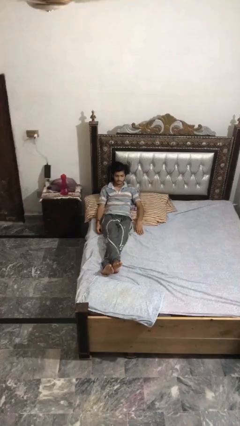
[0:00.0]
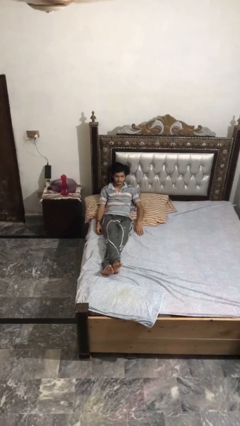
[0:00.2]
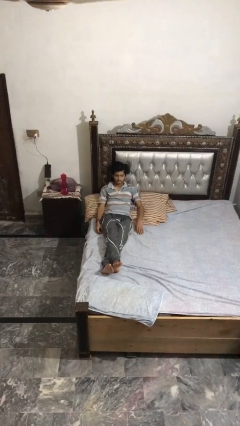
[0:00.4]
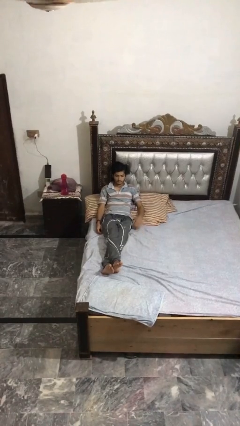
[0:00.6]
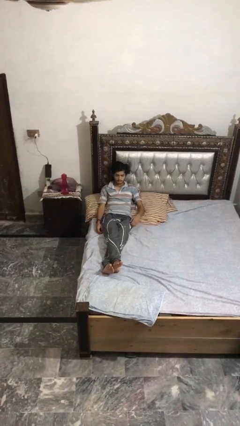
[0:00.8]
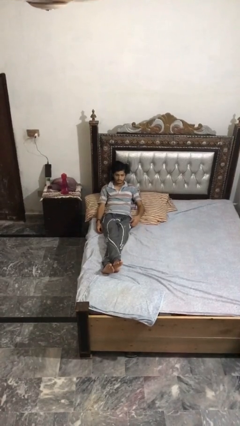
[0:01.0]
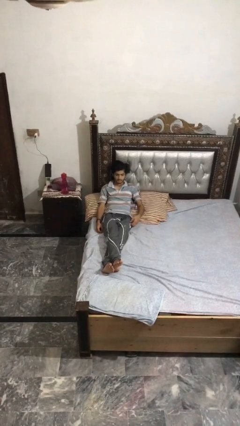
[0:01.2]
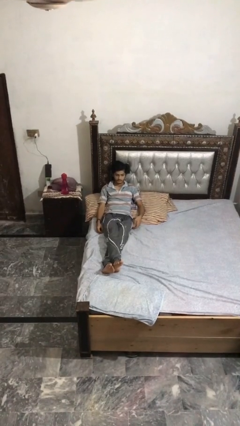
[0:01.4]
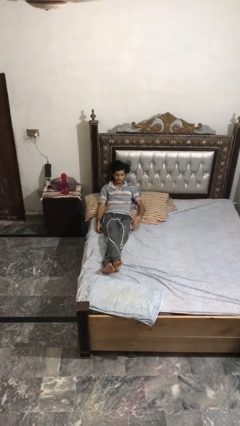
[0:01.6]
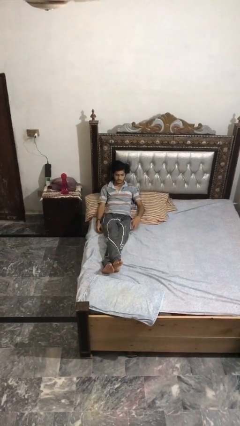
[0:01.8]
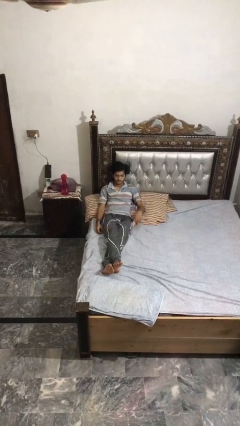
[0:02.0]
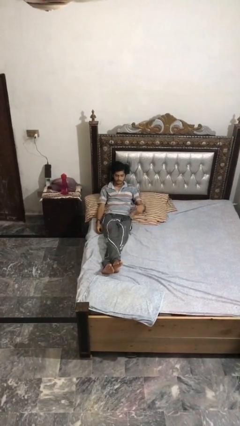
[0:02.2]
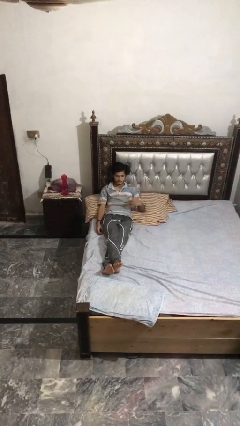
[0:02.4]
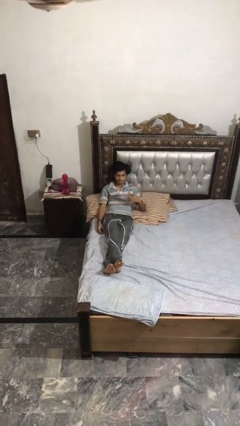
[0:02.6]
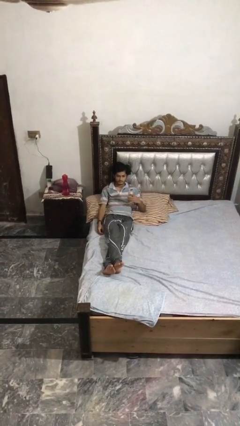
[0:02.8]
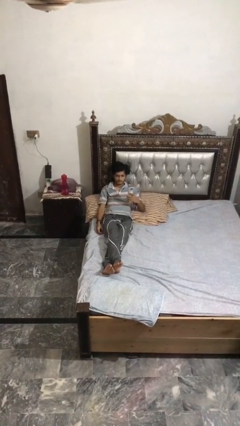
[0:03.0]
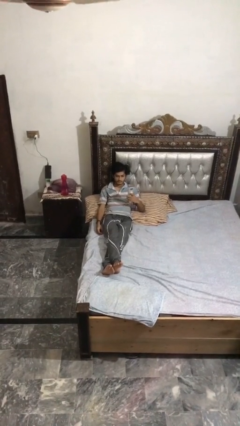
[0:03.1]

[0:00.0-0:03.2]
person takes phone from pocket

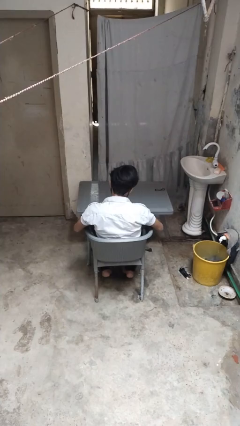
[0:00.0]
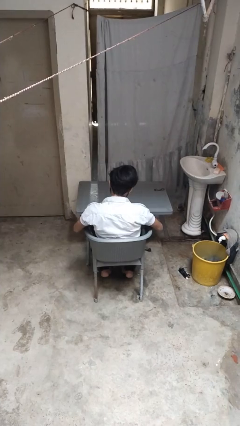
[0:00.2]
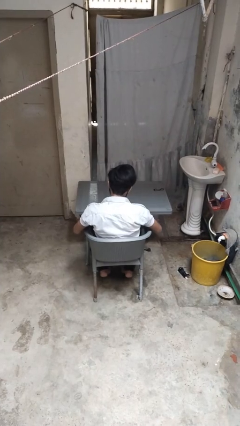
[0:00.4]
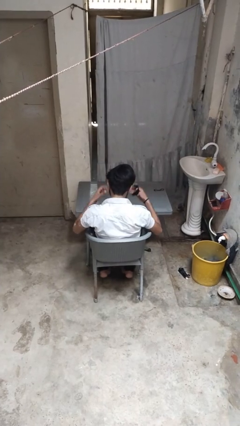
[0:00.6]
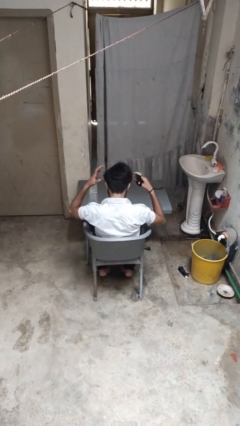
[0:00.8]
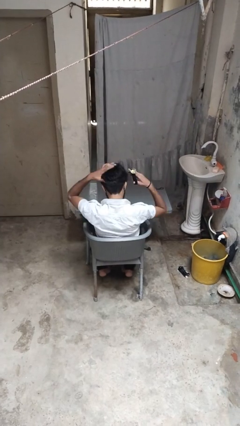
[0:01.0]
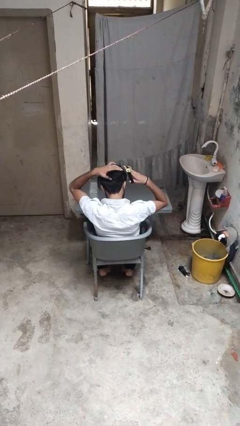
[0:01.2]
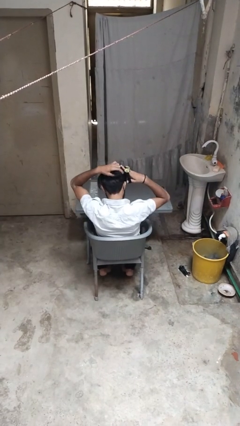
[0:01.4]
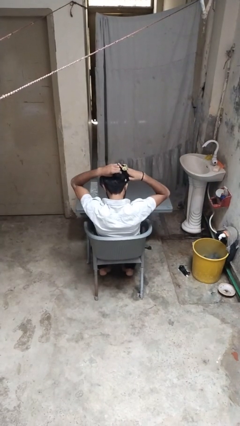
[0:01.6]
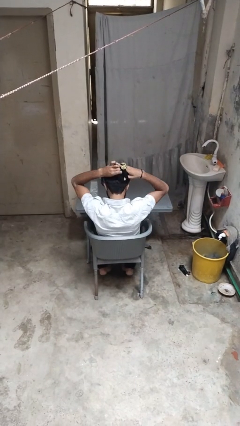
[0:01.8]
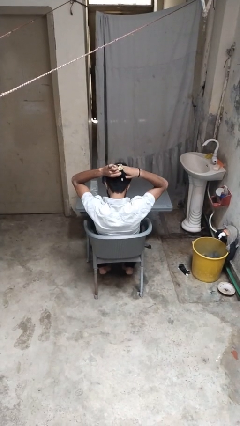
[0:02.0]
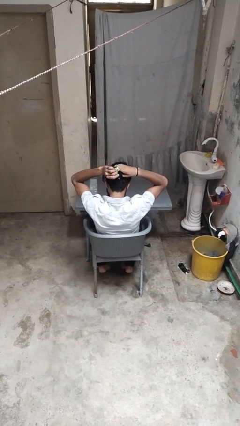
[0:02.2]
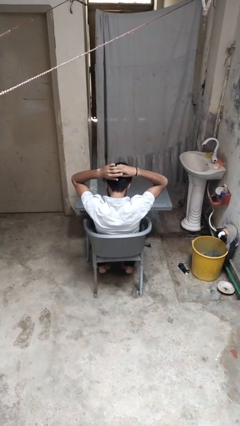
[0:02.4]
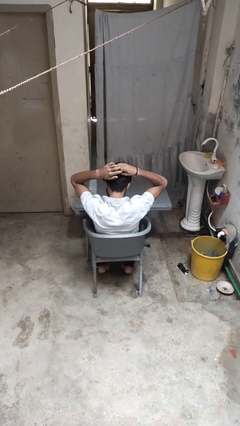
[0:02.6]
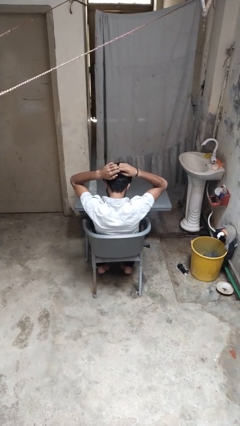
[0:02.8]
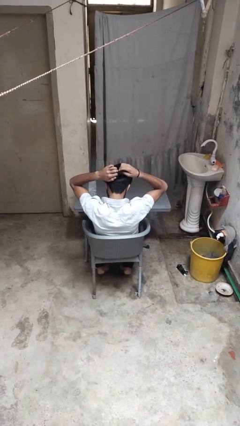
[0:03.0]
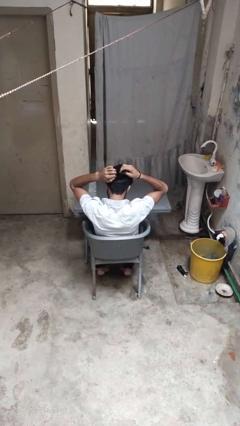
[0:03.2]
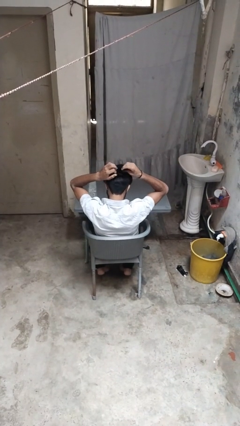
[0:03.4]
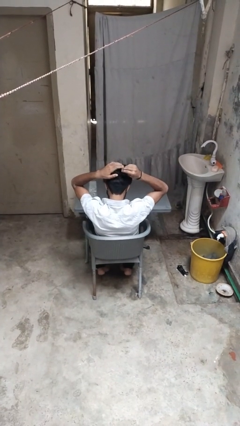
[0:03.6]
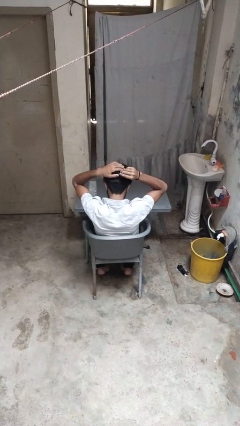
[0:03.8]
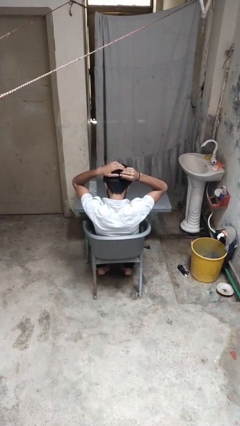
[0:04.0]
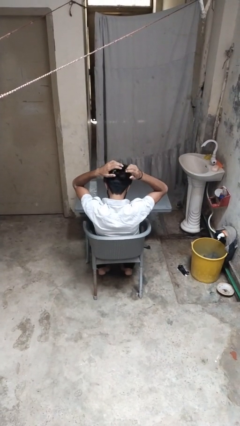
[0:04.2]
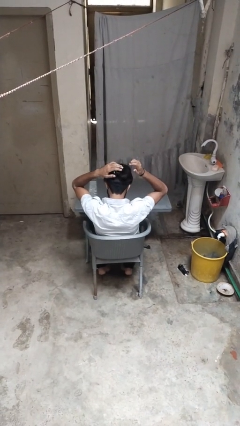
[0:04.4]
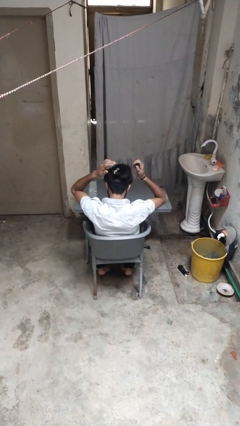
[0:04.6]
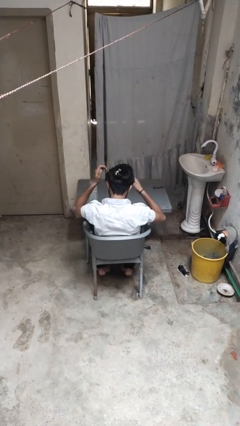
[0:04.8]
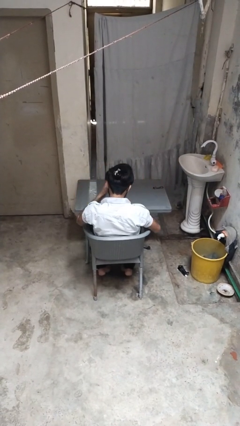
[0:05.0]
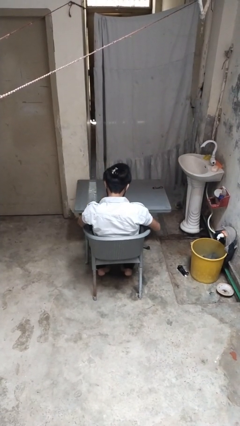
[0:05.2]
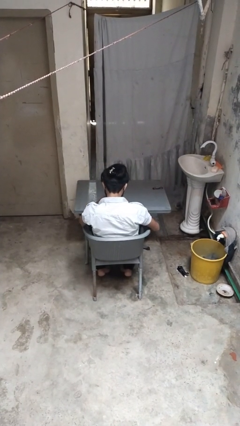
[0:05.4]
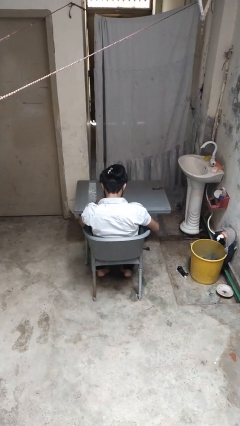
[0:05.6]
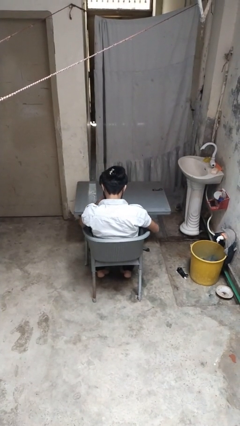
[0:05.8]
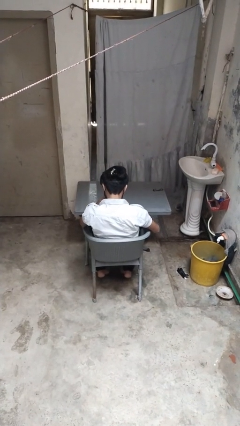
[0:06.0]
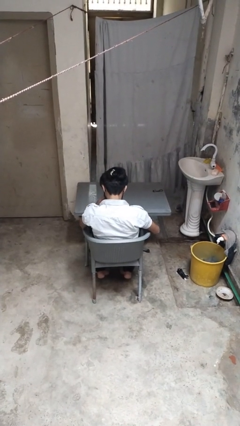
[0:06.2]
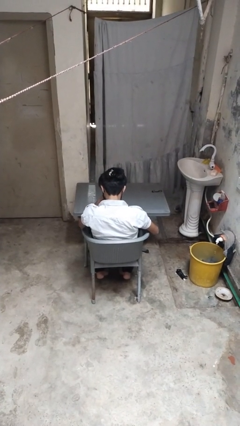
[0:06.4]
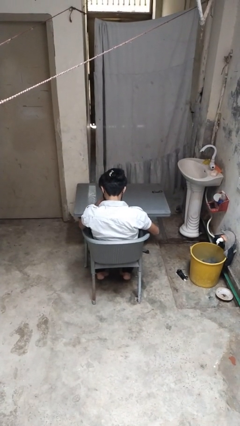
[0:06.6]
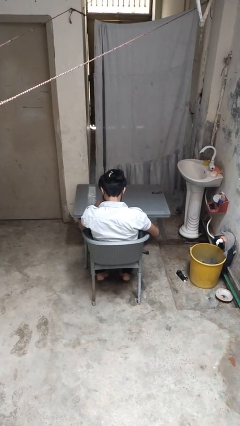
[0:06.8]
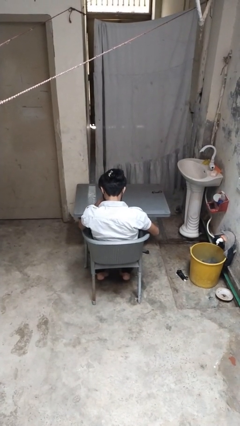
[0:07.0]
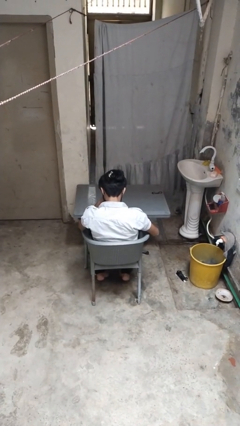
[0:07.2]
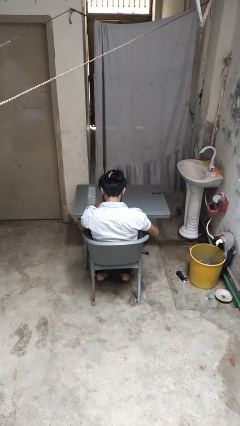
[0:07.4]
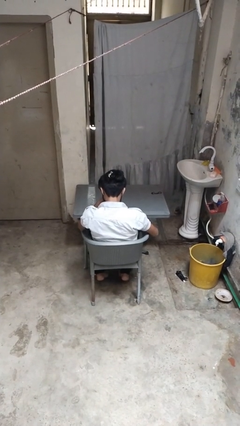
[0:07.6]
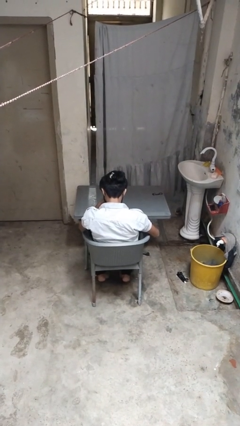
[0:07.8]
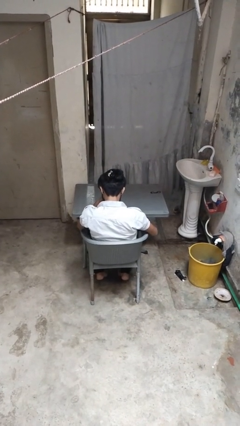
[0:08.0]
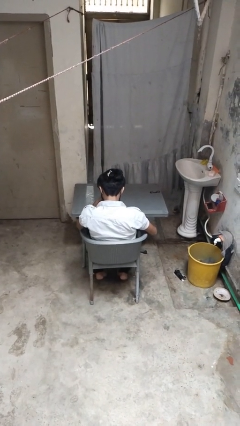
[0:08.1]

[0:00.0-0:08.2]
person puts hair in ponytail

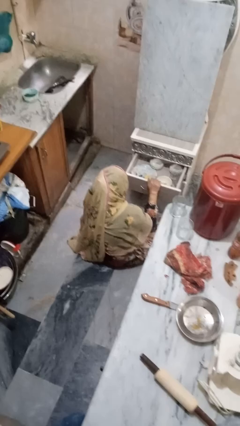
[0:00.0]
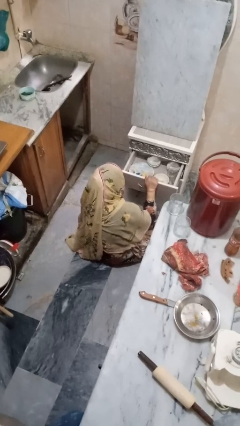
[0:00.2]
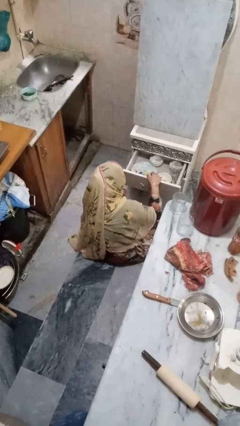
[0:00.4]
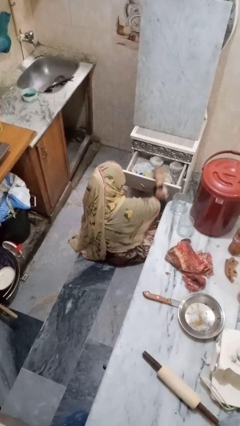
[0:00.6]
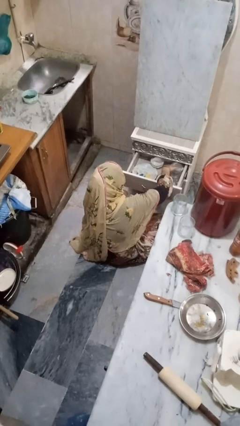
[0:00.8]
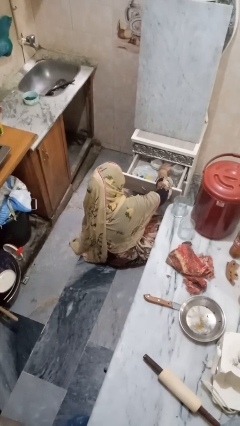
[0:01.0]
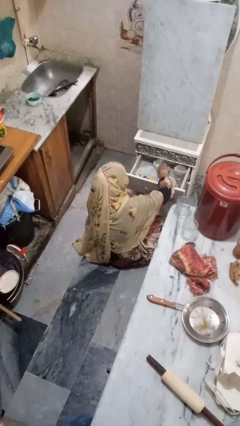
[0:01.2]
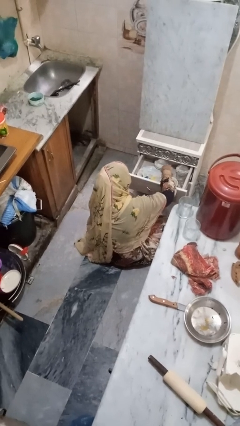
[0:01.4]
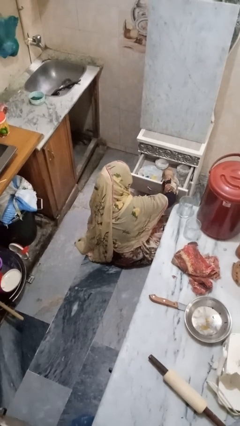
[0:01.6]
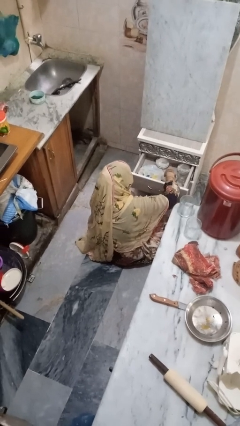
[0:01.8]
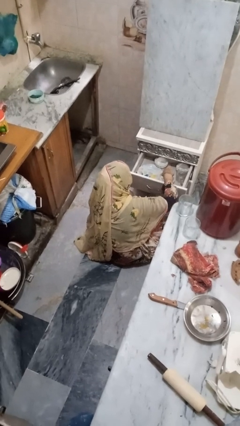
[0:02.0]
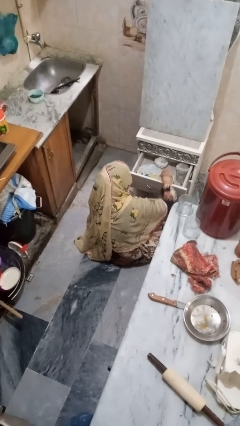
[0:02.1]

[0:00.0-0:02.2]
person searches in kitchen drawer

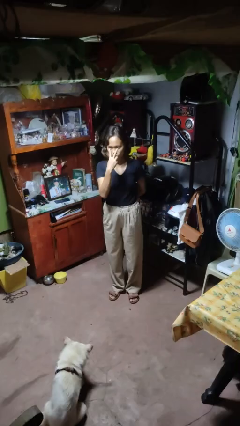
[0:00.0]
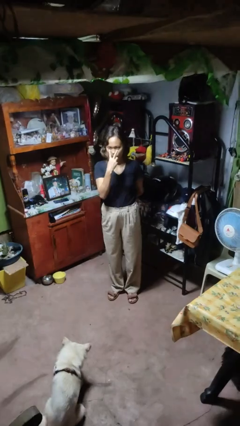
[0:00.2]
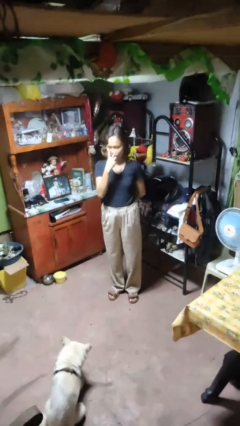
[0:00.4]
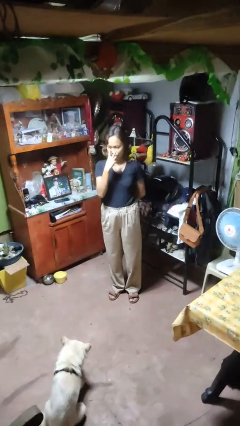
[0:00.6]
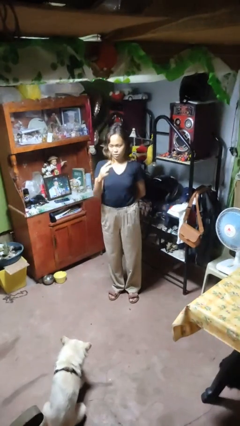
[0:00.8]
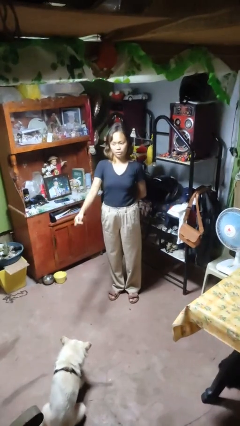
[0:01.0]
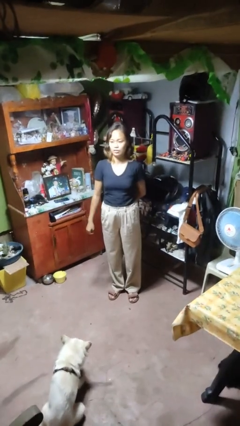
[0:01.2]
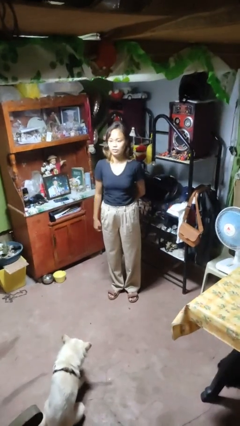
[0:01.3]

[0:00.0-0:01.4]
person gestures watch closely

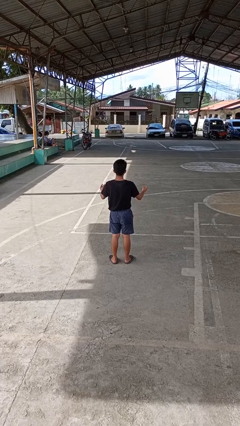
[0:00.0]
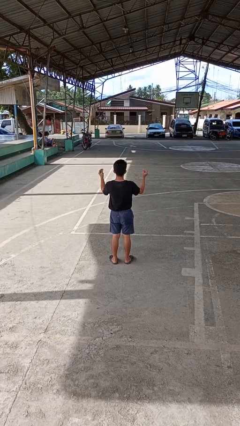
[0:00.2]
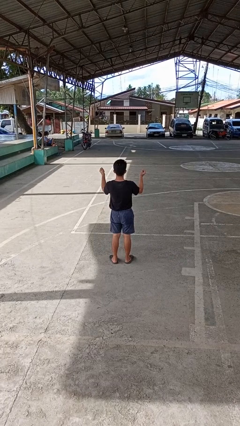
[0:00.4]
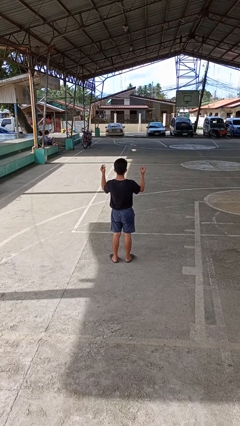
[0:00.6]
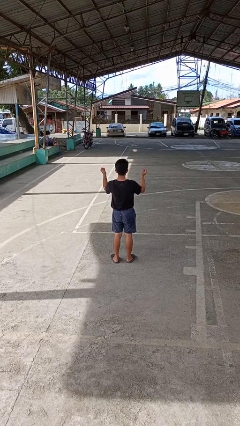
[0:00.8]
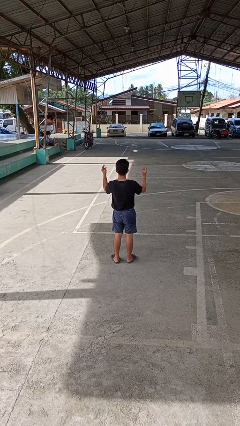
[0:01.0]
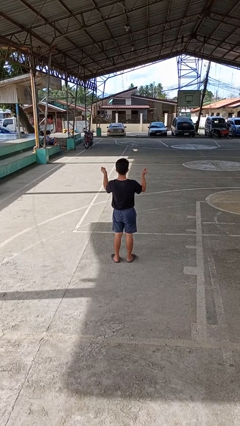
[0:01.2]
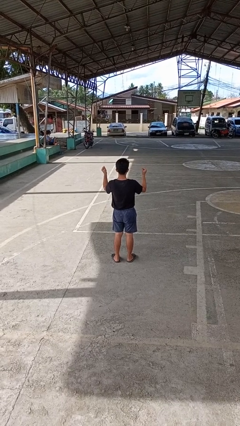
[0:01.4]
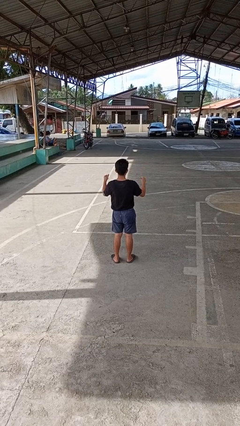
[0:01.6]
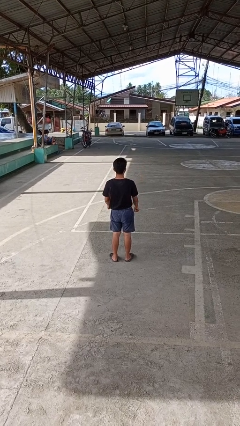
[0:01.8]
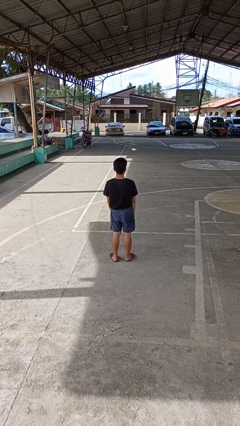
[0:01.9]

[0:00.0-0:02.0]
person snaps fingers

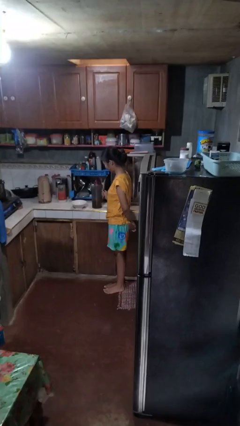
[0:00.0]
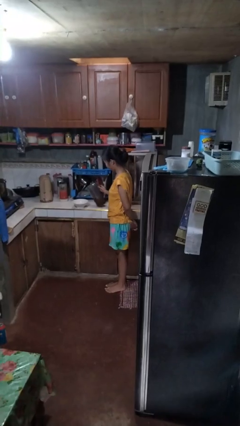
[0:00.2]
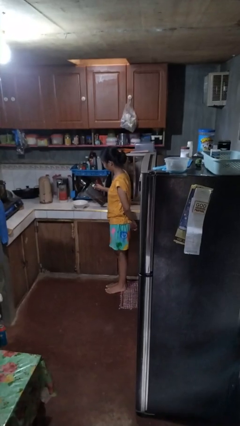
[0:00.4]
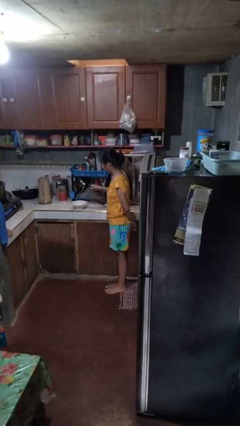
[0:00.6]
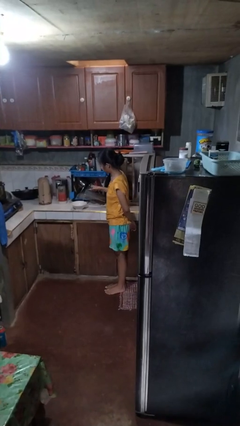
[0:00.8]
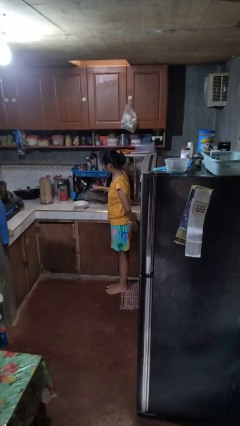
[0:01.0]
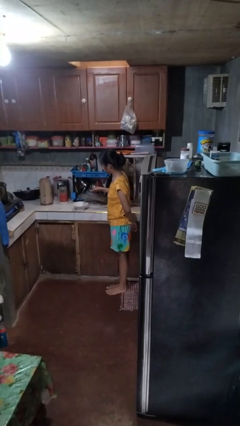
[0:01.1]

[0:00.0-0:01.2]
person pours into bowl
